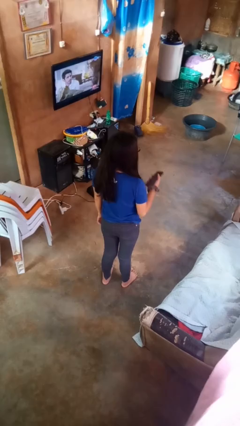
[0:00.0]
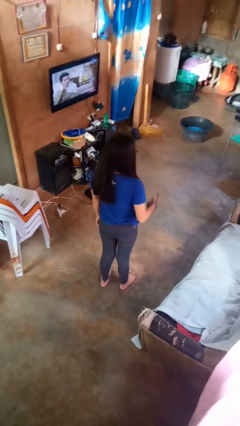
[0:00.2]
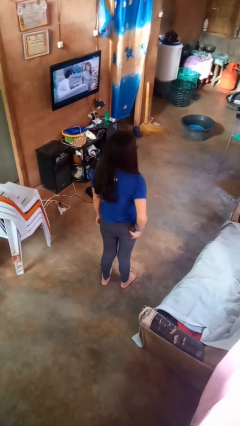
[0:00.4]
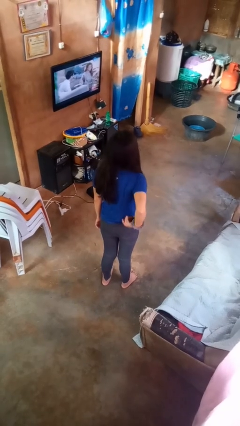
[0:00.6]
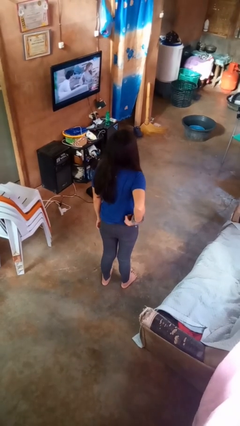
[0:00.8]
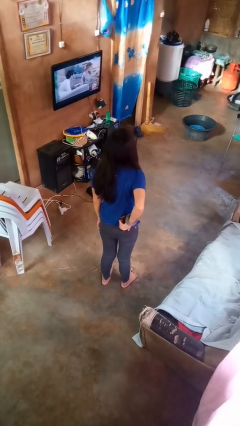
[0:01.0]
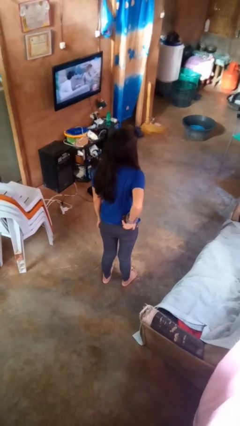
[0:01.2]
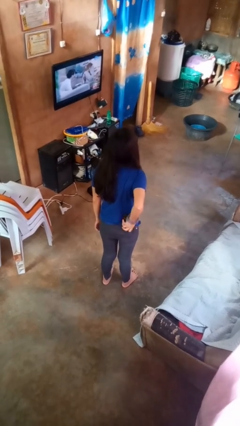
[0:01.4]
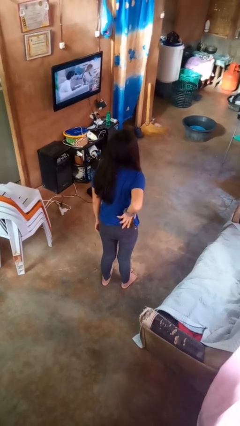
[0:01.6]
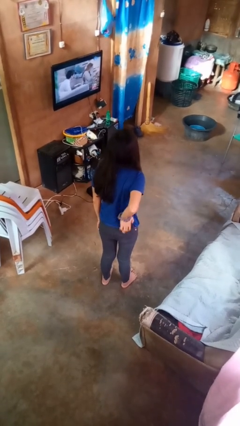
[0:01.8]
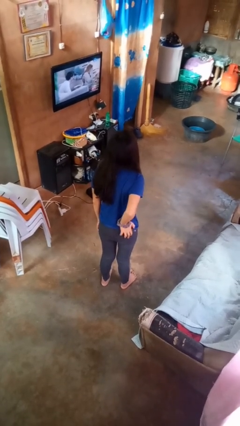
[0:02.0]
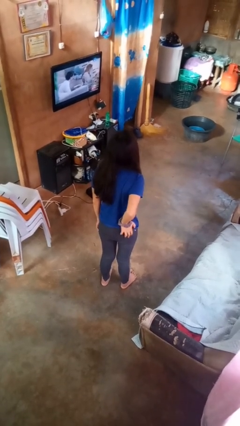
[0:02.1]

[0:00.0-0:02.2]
person puts phone into pocket

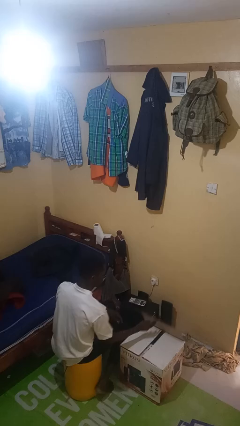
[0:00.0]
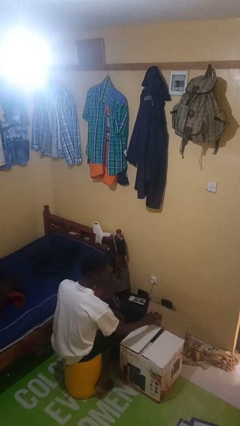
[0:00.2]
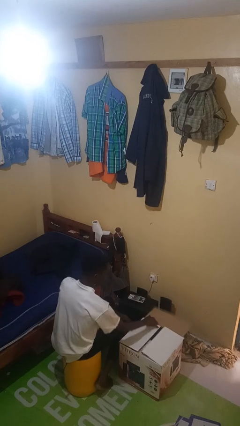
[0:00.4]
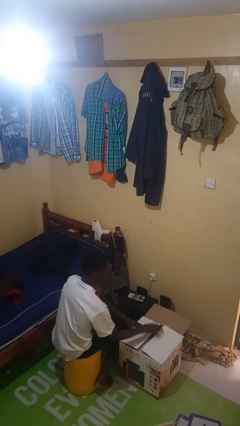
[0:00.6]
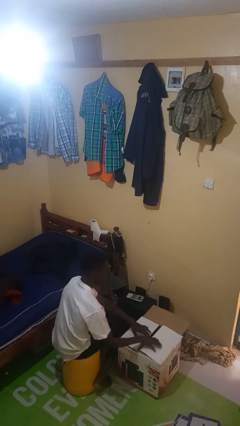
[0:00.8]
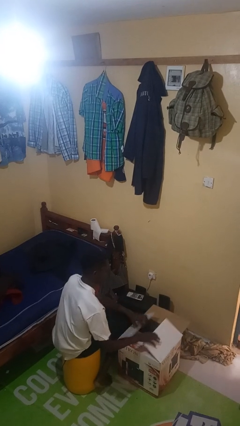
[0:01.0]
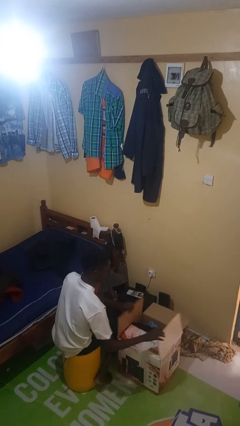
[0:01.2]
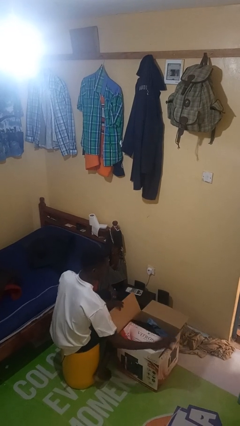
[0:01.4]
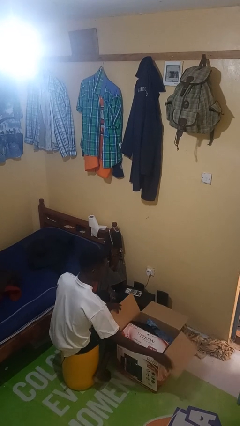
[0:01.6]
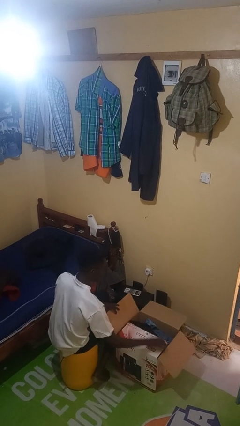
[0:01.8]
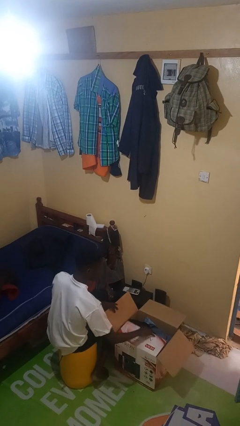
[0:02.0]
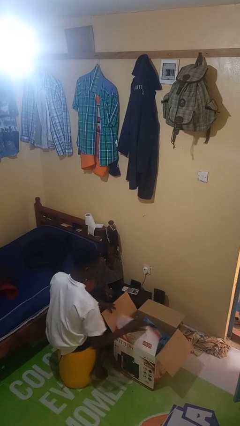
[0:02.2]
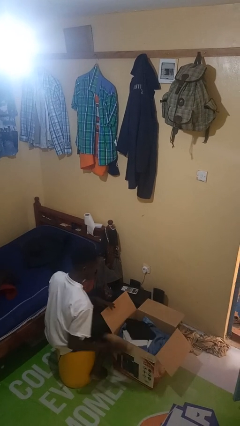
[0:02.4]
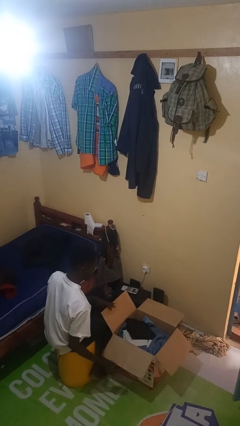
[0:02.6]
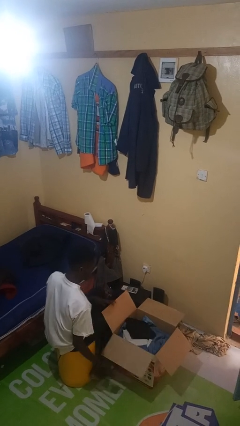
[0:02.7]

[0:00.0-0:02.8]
person opens box

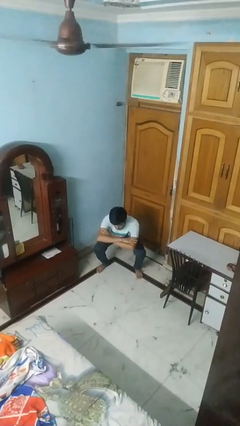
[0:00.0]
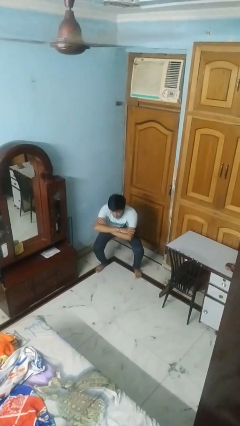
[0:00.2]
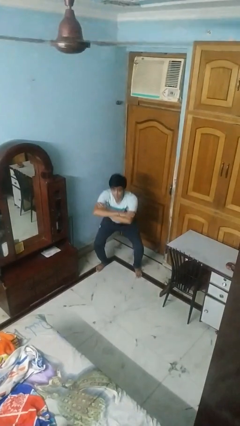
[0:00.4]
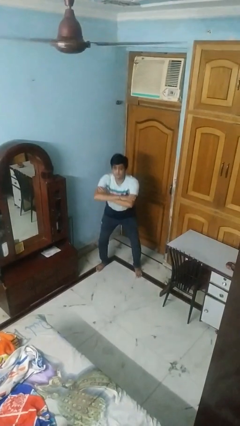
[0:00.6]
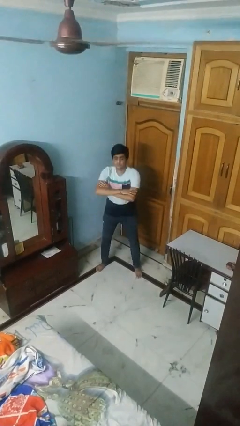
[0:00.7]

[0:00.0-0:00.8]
person stands up

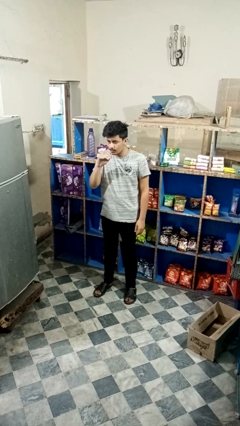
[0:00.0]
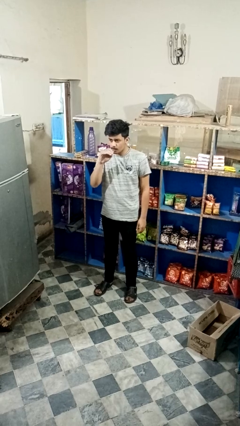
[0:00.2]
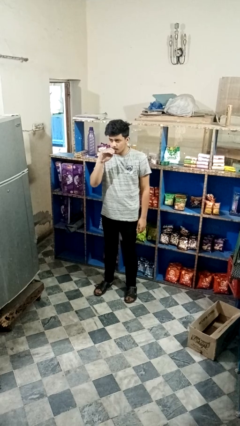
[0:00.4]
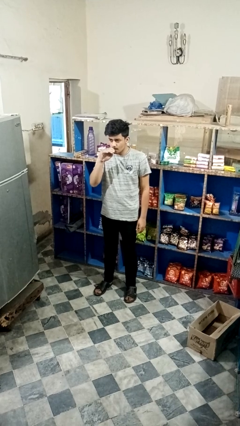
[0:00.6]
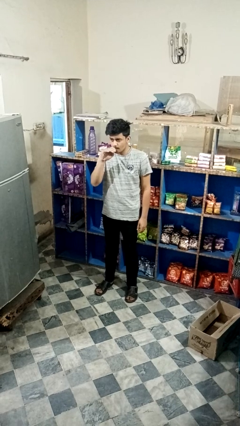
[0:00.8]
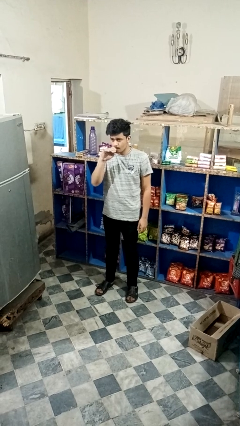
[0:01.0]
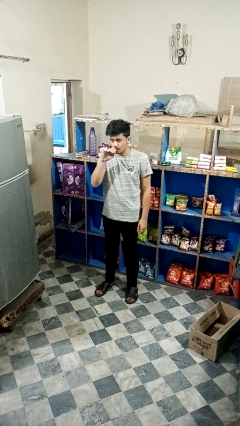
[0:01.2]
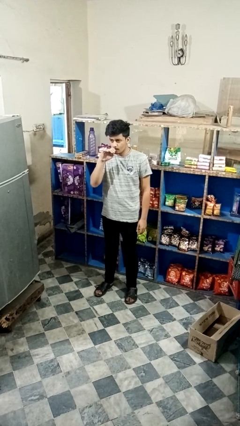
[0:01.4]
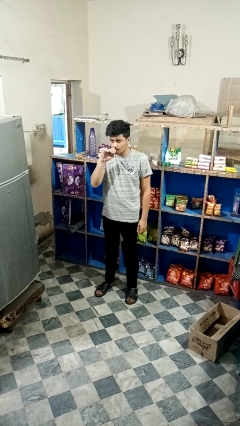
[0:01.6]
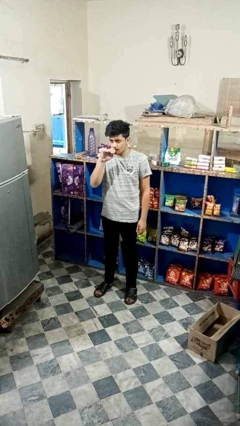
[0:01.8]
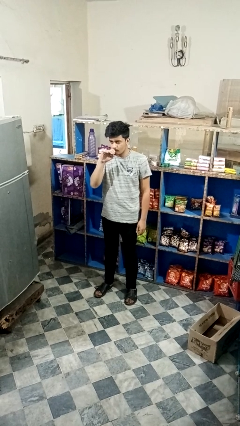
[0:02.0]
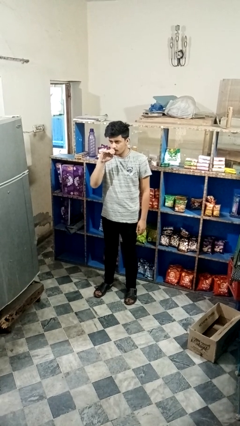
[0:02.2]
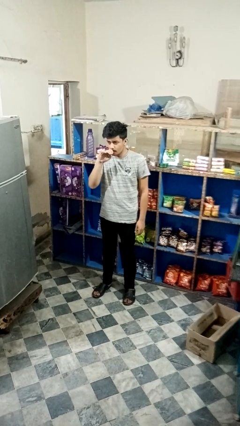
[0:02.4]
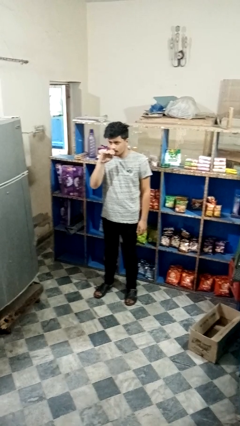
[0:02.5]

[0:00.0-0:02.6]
person vapes

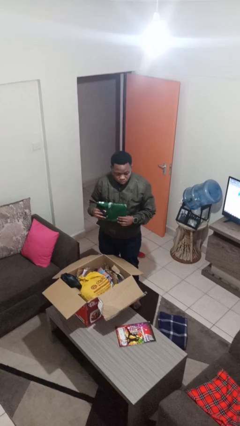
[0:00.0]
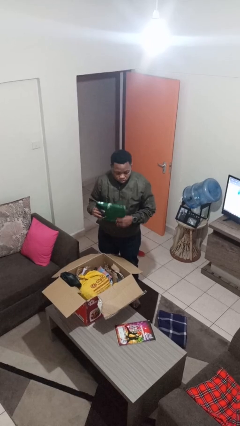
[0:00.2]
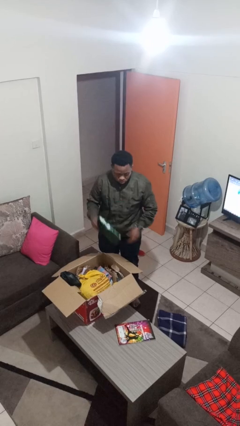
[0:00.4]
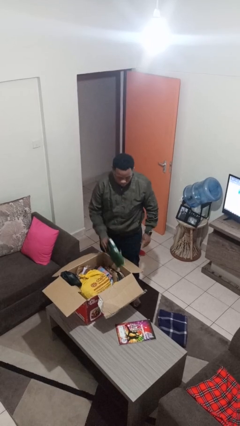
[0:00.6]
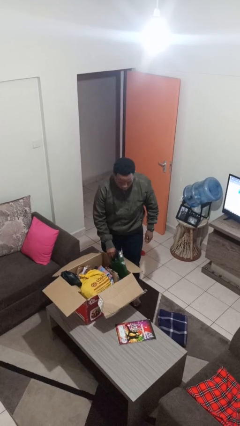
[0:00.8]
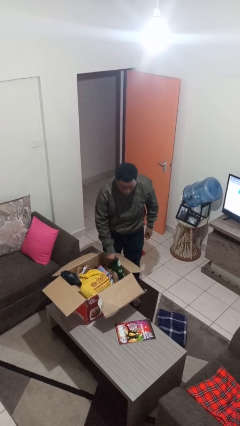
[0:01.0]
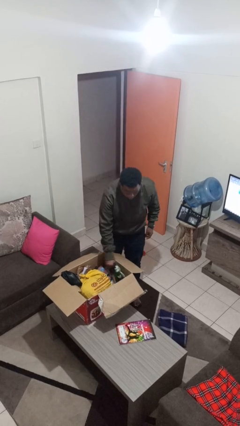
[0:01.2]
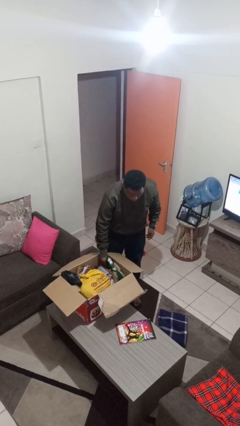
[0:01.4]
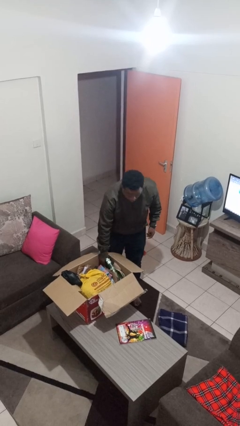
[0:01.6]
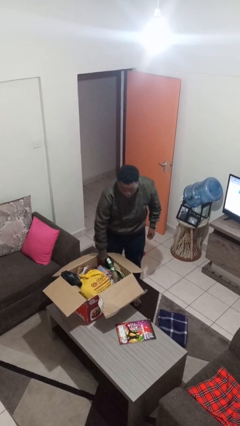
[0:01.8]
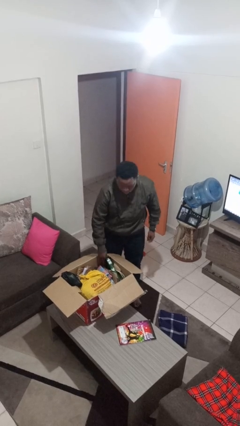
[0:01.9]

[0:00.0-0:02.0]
person puts object into box

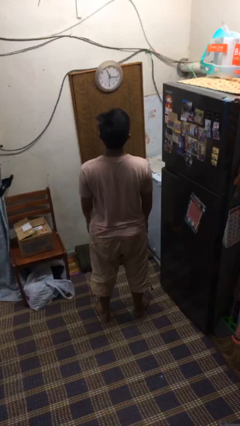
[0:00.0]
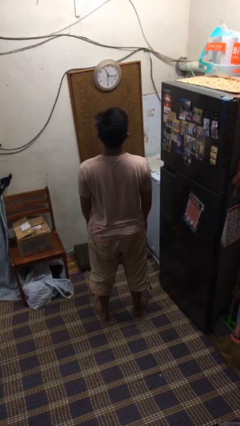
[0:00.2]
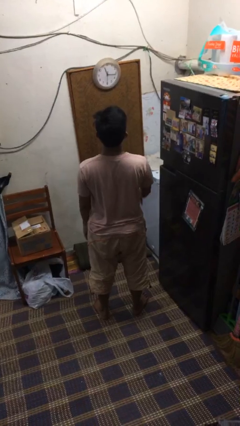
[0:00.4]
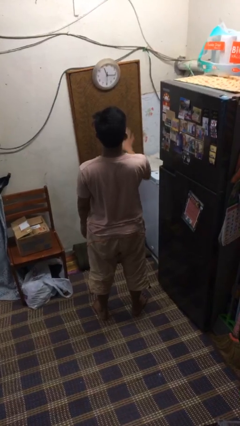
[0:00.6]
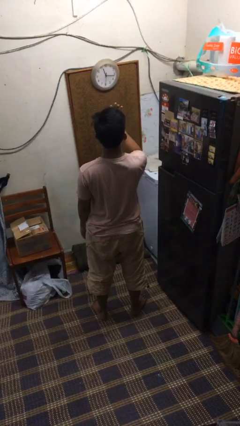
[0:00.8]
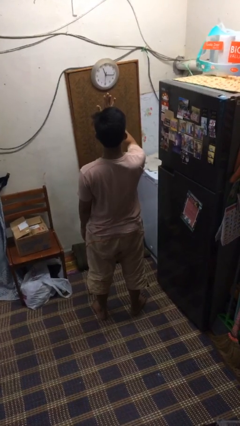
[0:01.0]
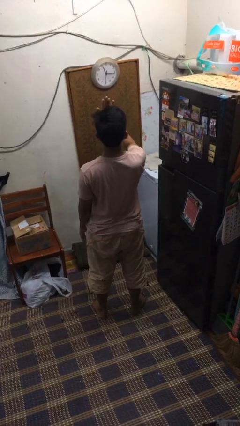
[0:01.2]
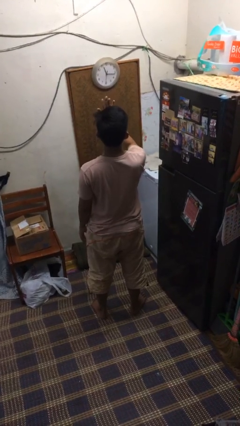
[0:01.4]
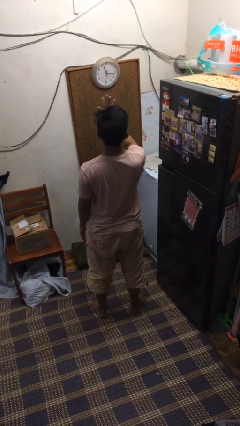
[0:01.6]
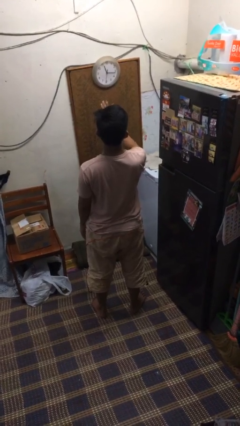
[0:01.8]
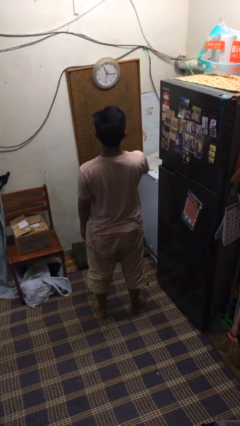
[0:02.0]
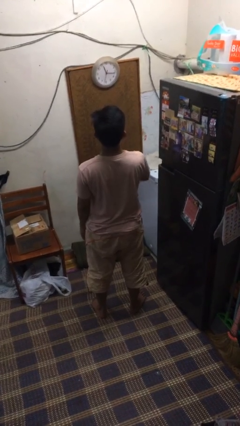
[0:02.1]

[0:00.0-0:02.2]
person gestures stop

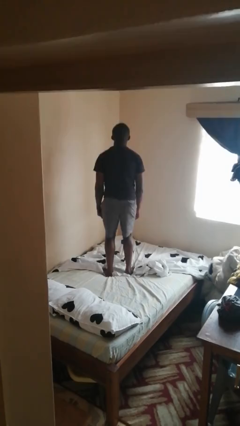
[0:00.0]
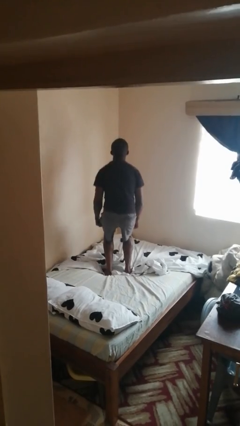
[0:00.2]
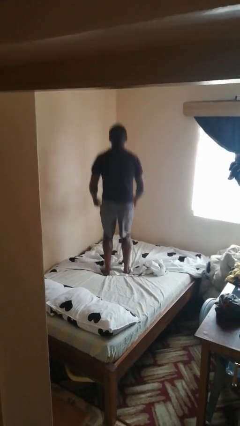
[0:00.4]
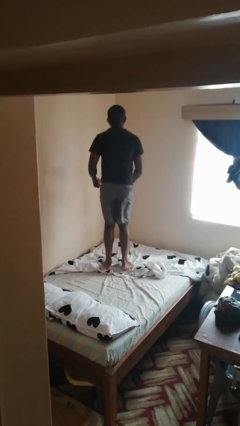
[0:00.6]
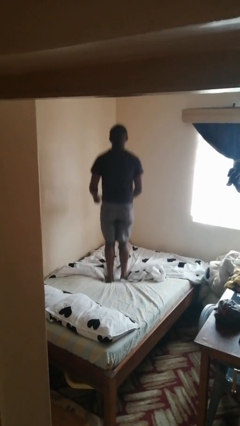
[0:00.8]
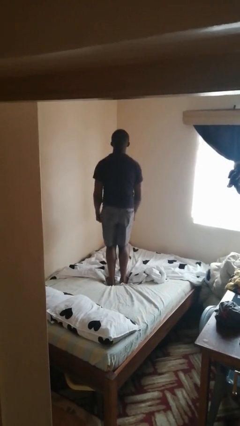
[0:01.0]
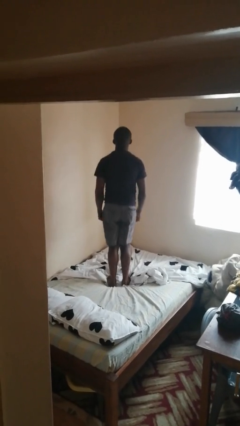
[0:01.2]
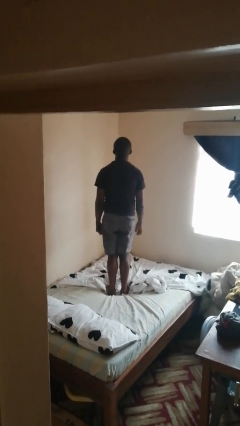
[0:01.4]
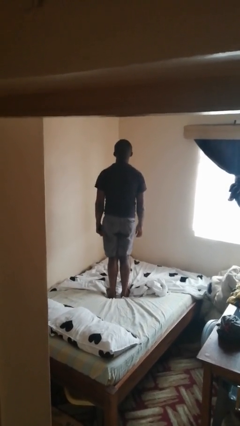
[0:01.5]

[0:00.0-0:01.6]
person jumps on bed

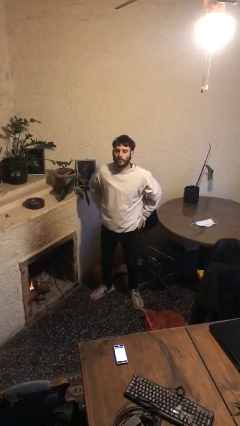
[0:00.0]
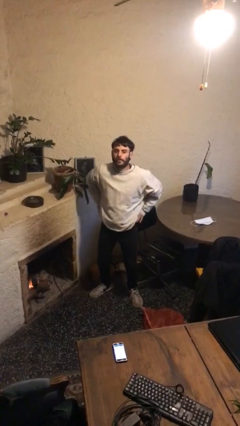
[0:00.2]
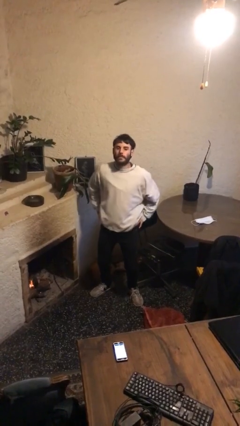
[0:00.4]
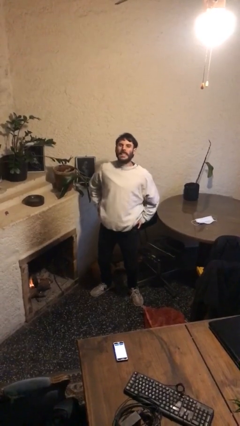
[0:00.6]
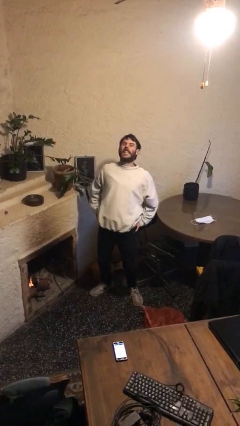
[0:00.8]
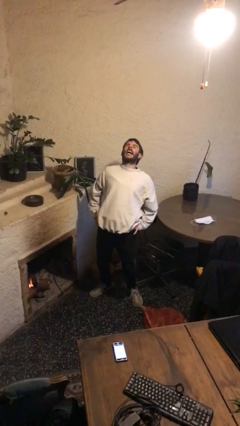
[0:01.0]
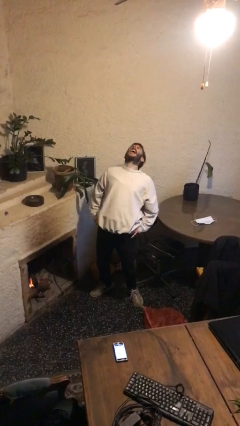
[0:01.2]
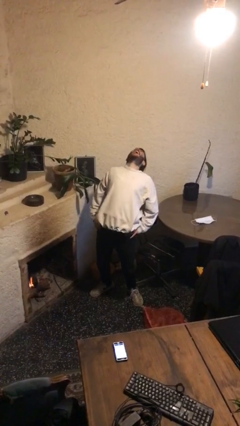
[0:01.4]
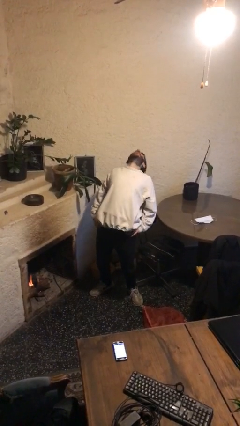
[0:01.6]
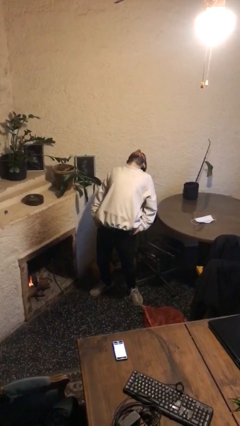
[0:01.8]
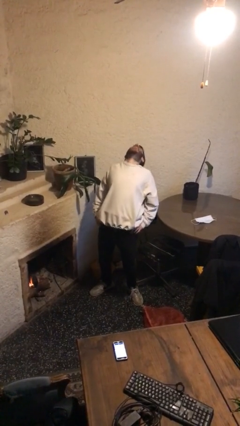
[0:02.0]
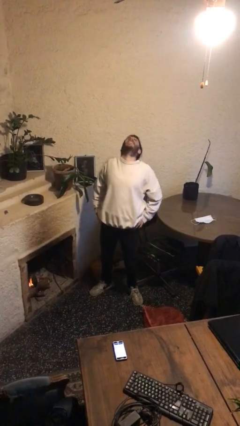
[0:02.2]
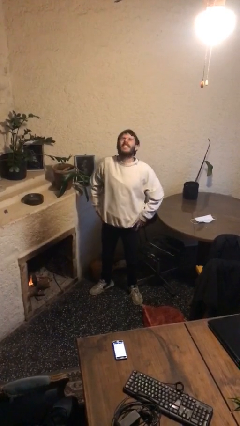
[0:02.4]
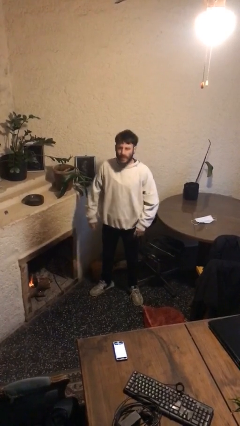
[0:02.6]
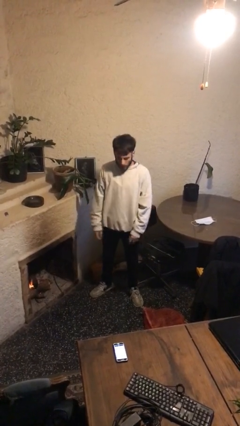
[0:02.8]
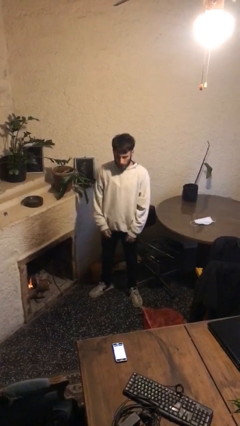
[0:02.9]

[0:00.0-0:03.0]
person stretches back
